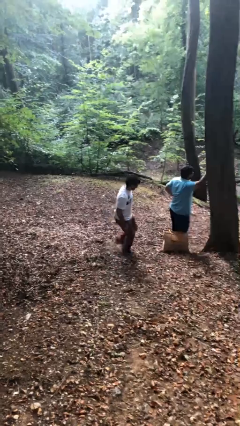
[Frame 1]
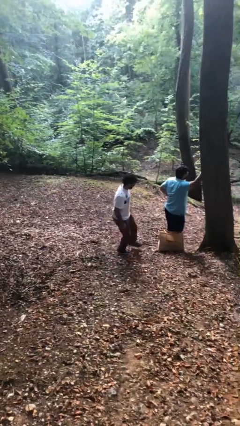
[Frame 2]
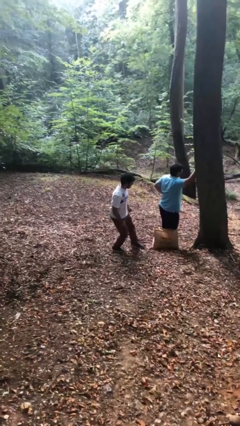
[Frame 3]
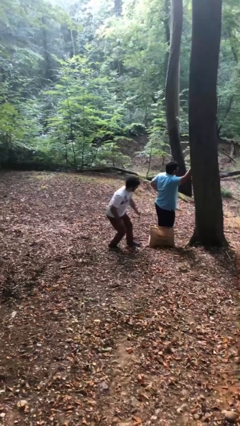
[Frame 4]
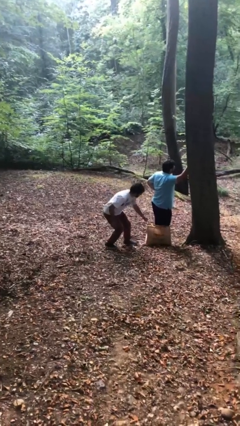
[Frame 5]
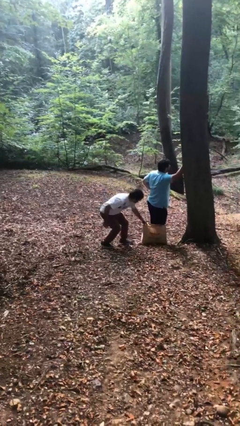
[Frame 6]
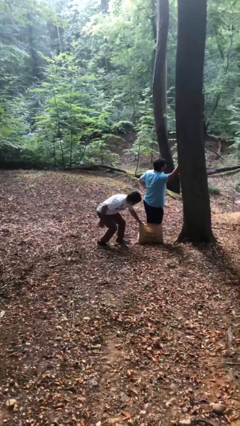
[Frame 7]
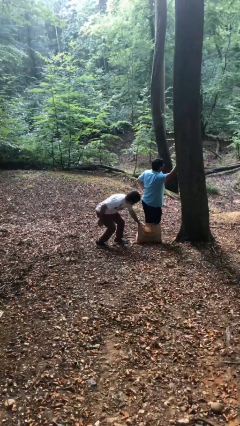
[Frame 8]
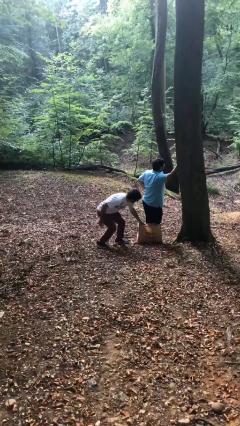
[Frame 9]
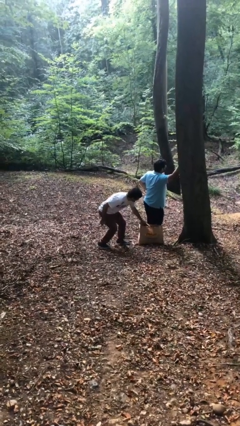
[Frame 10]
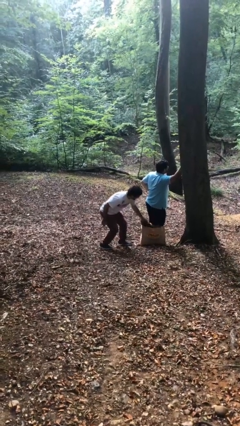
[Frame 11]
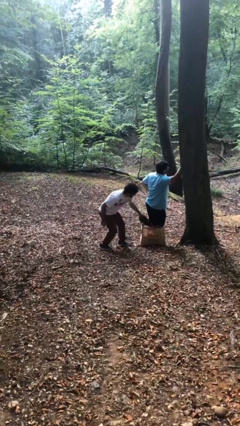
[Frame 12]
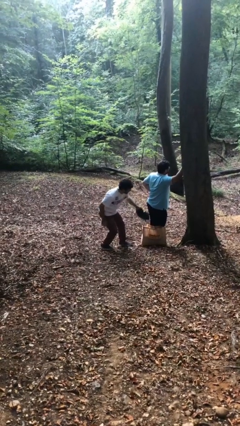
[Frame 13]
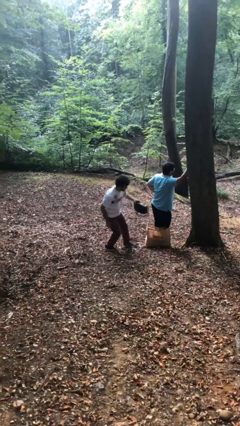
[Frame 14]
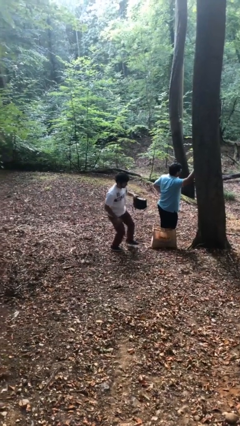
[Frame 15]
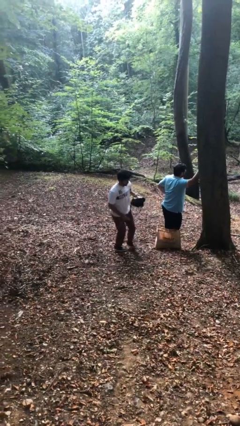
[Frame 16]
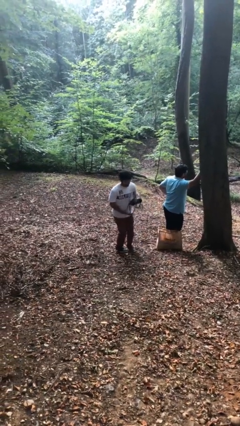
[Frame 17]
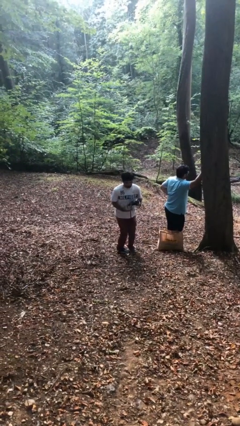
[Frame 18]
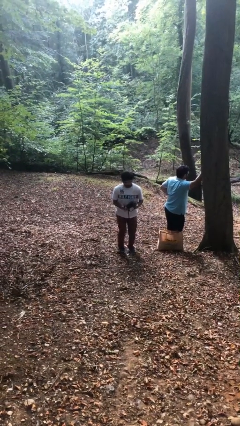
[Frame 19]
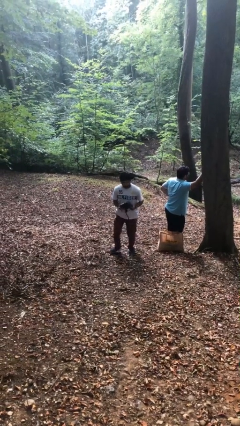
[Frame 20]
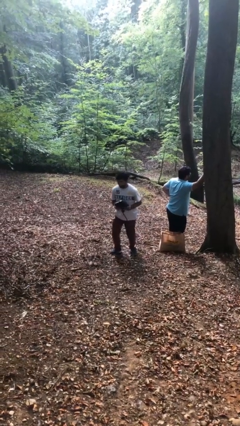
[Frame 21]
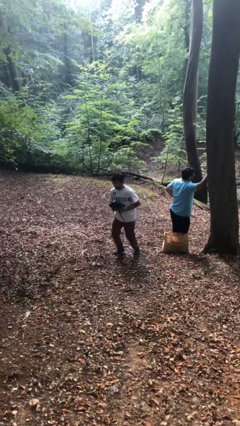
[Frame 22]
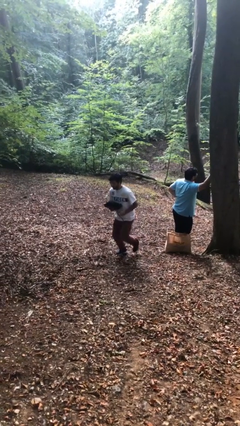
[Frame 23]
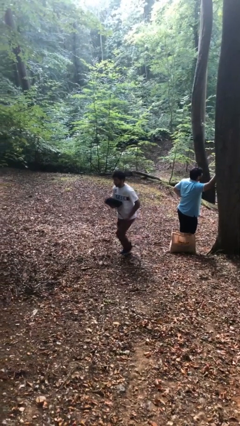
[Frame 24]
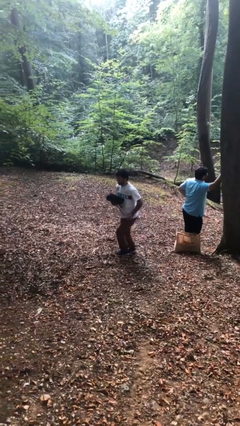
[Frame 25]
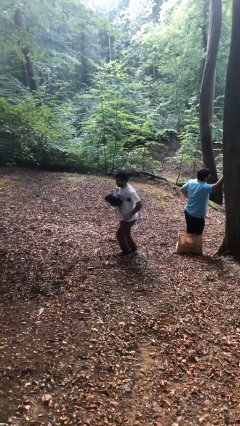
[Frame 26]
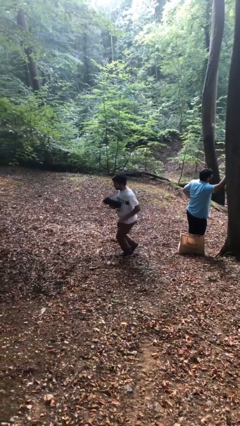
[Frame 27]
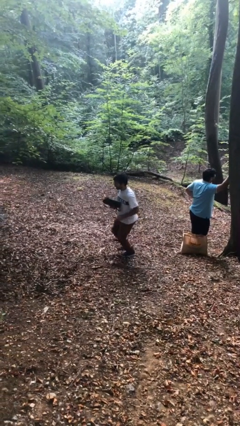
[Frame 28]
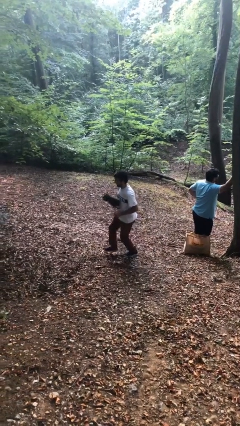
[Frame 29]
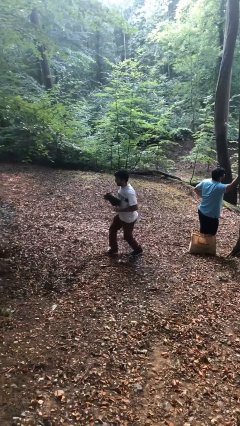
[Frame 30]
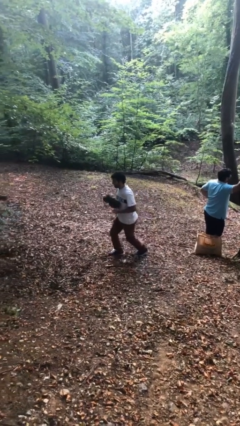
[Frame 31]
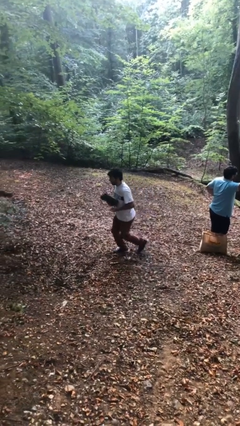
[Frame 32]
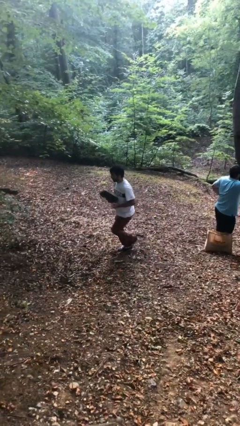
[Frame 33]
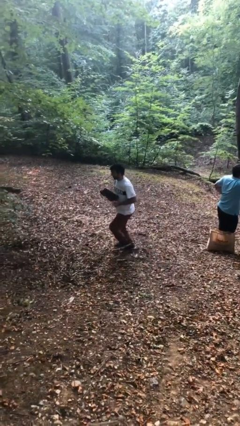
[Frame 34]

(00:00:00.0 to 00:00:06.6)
person steals object from person

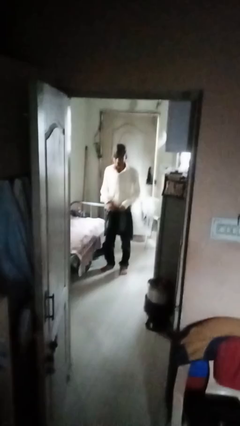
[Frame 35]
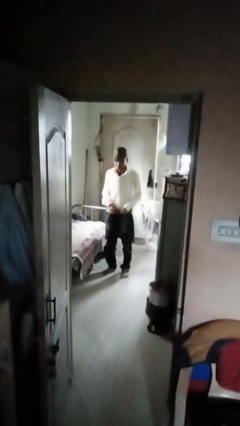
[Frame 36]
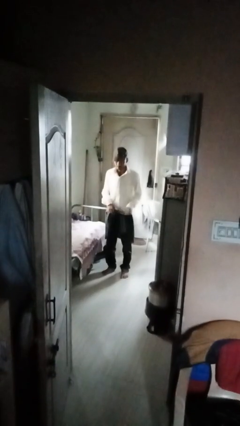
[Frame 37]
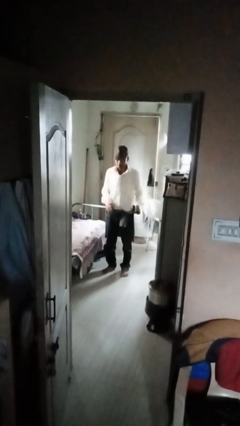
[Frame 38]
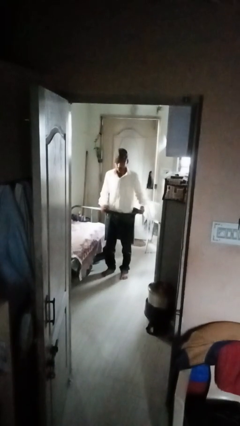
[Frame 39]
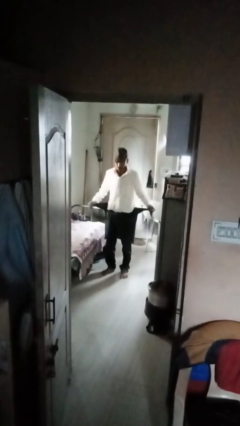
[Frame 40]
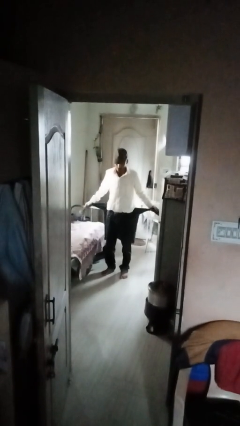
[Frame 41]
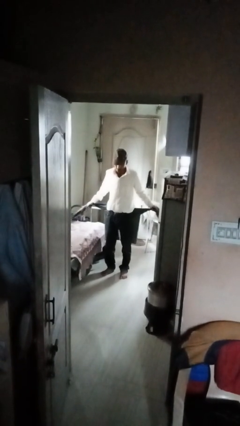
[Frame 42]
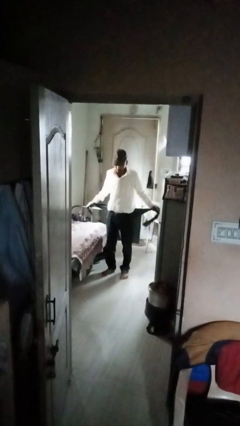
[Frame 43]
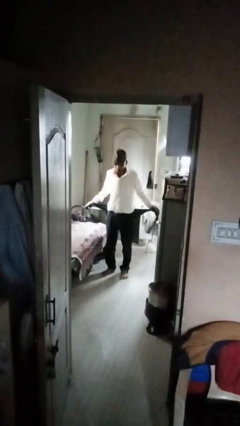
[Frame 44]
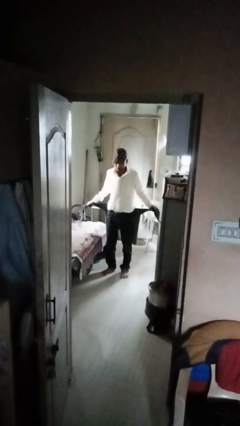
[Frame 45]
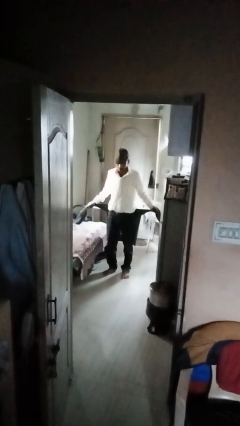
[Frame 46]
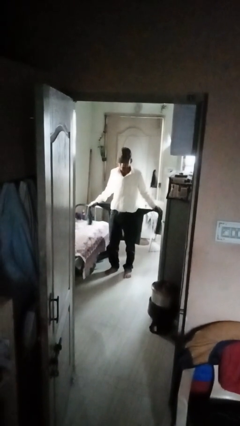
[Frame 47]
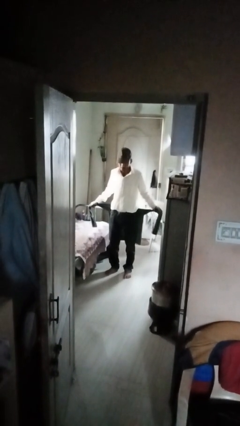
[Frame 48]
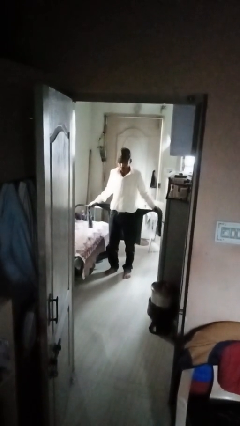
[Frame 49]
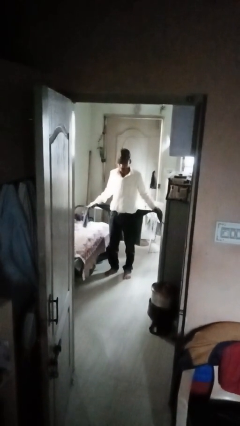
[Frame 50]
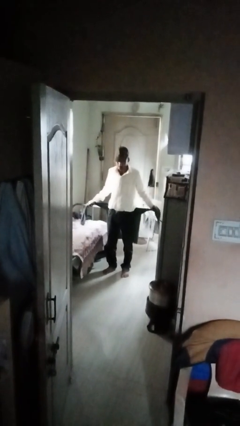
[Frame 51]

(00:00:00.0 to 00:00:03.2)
person unties jacket around waist

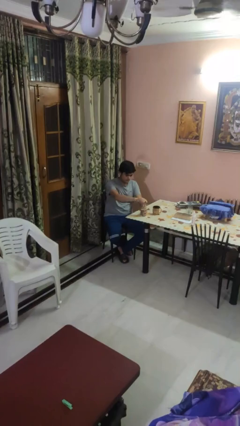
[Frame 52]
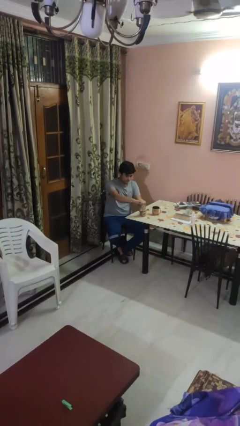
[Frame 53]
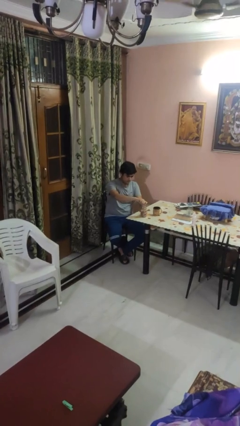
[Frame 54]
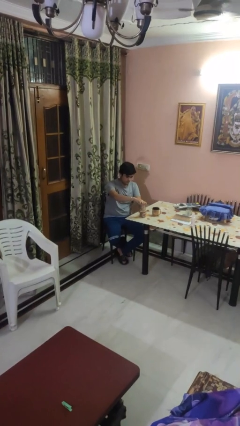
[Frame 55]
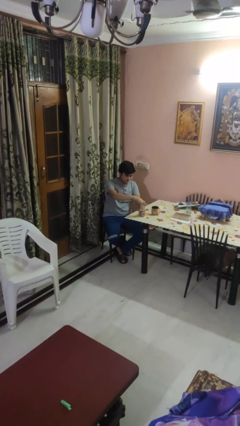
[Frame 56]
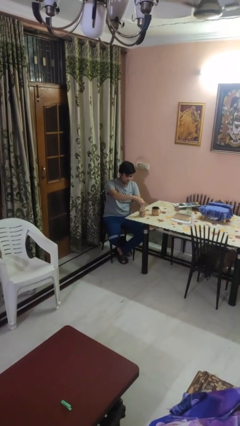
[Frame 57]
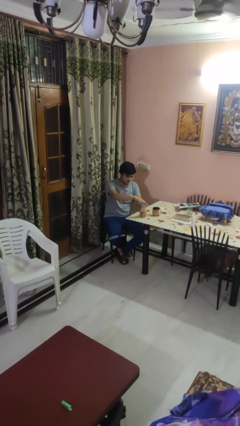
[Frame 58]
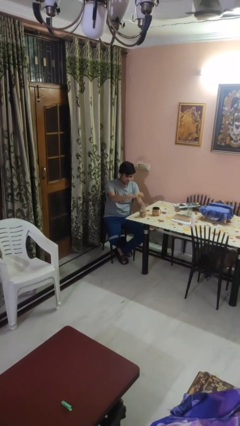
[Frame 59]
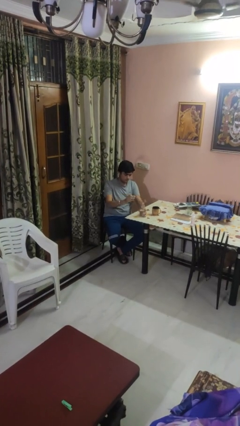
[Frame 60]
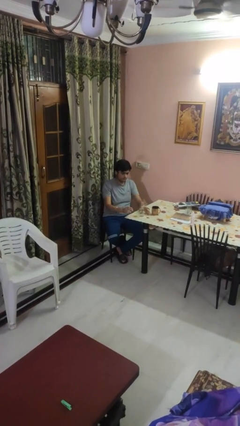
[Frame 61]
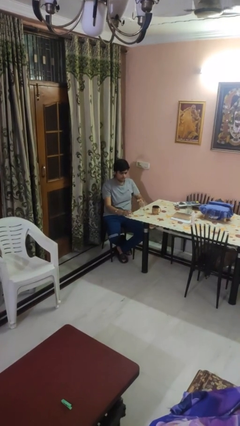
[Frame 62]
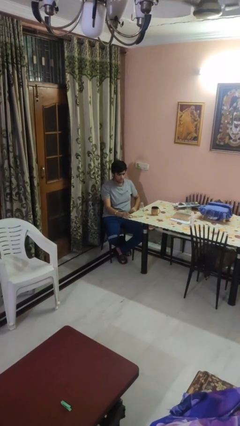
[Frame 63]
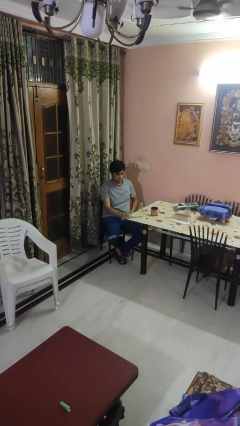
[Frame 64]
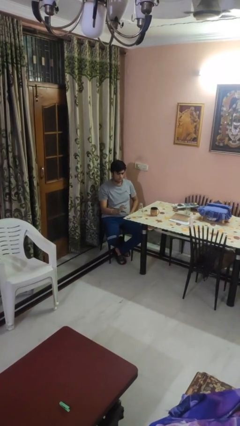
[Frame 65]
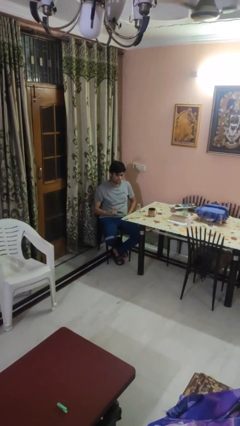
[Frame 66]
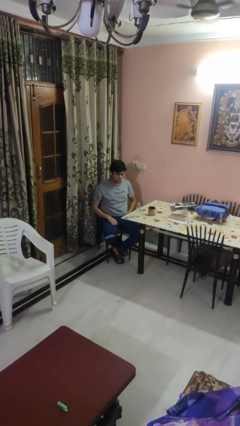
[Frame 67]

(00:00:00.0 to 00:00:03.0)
person unscrews lid from bottle

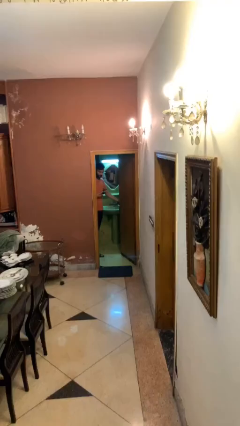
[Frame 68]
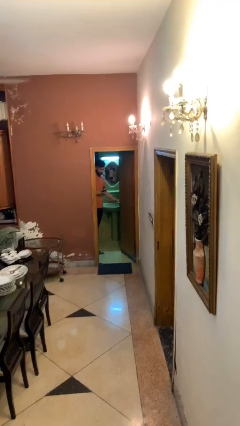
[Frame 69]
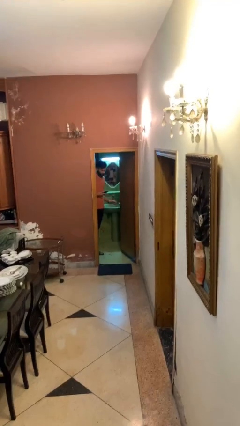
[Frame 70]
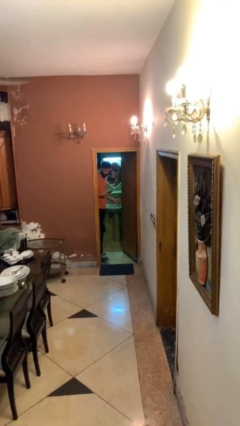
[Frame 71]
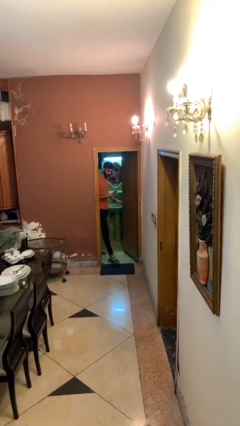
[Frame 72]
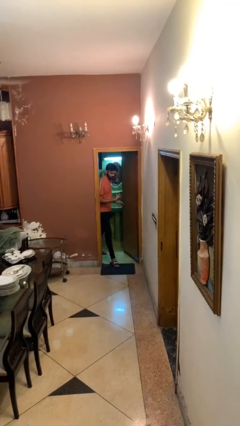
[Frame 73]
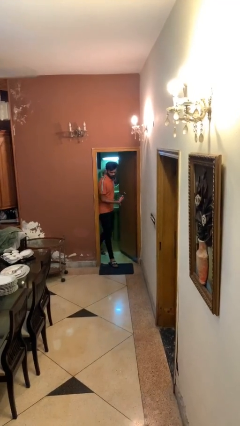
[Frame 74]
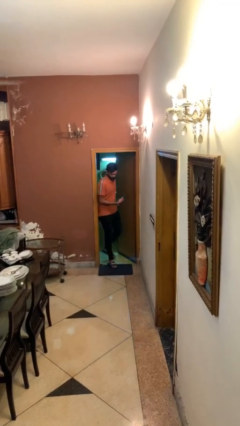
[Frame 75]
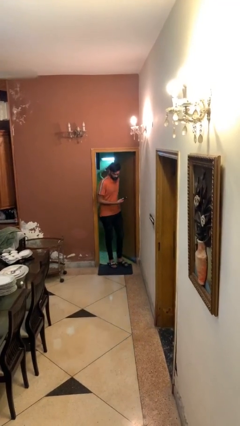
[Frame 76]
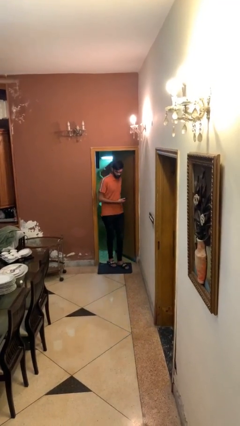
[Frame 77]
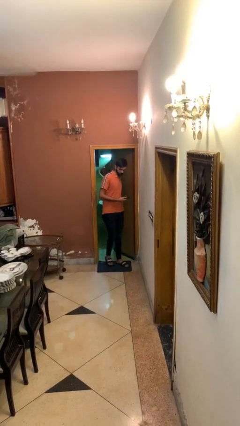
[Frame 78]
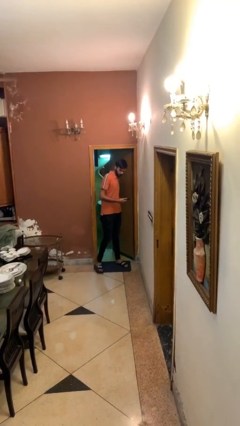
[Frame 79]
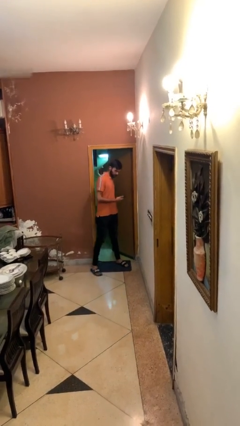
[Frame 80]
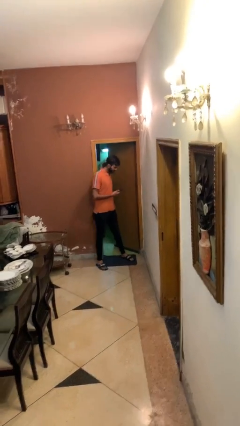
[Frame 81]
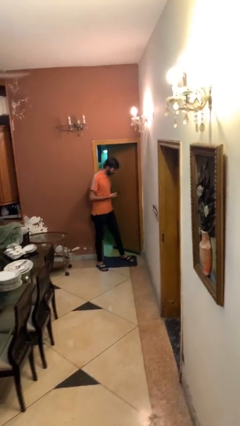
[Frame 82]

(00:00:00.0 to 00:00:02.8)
person enters scene through structure

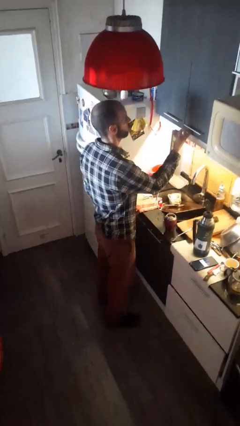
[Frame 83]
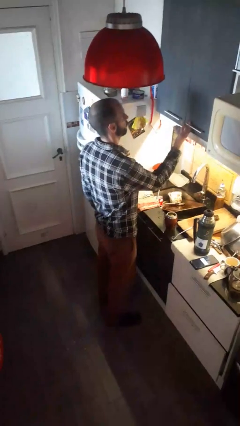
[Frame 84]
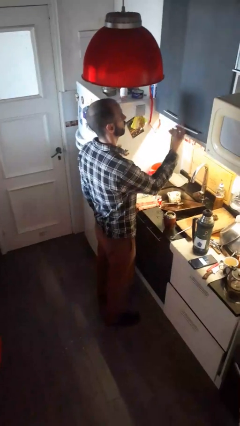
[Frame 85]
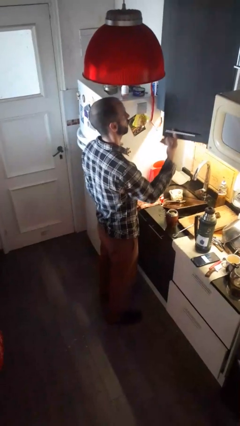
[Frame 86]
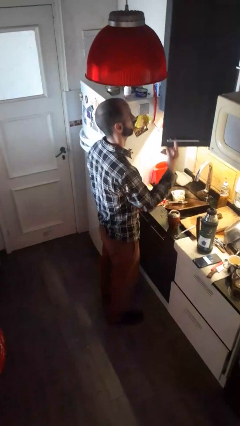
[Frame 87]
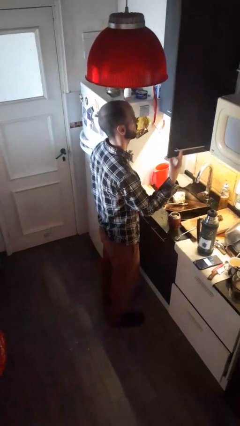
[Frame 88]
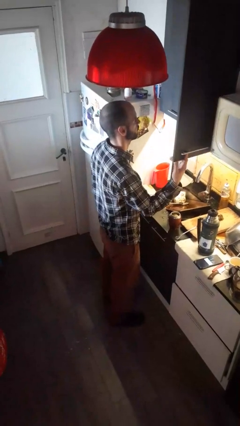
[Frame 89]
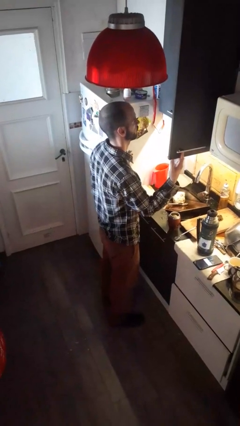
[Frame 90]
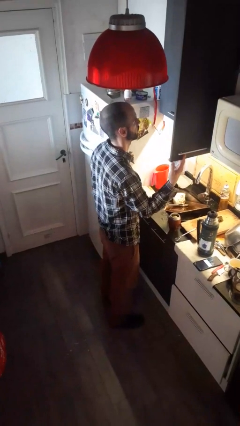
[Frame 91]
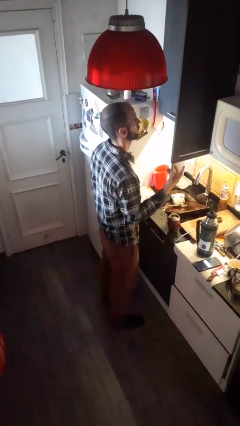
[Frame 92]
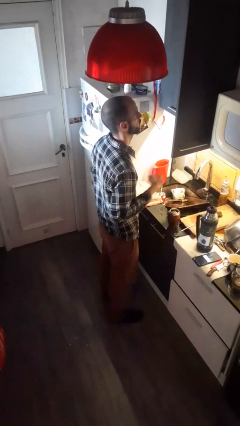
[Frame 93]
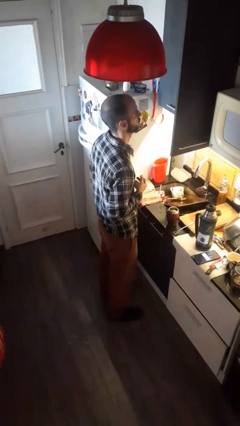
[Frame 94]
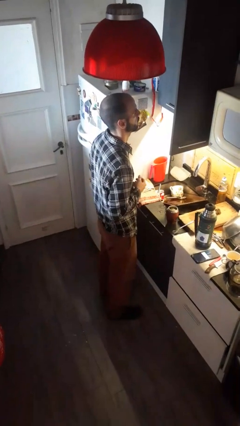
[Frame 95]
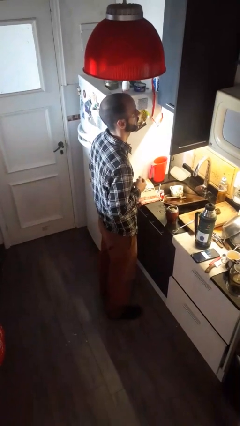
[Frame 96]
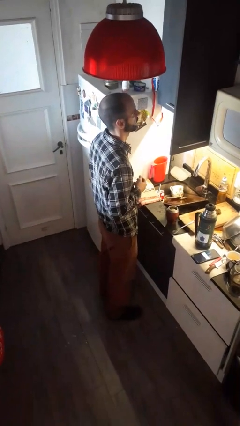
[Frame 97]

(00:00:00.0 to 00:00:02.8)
person opens kitchen drawer
